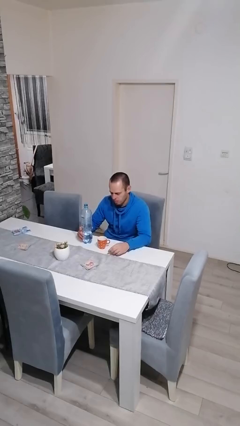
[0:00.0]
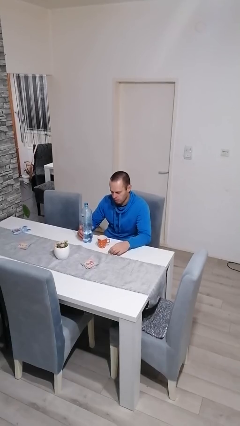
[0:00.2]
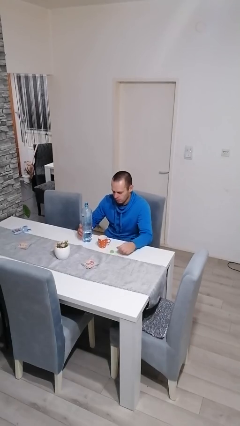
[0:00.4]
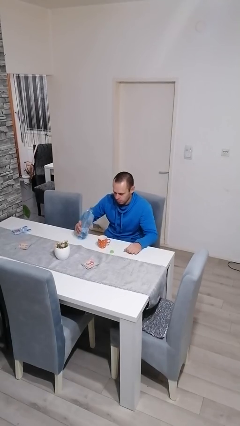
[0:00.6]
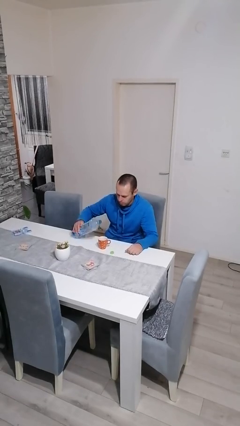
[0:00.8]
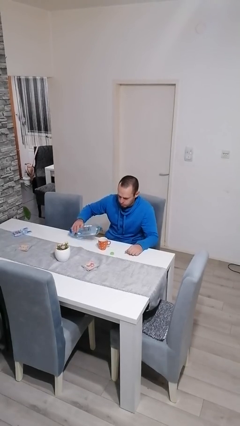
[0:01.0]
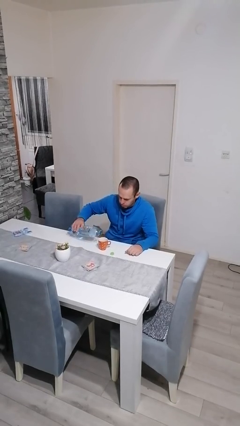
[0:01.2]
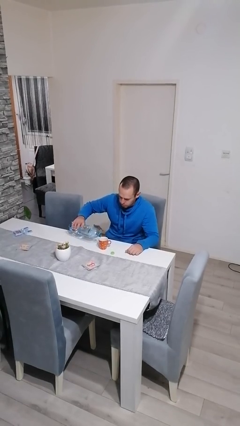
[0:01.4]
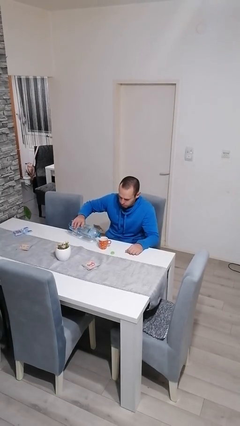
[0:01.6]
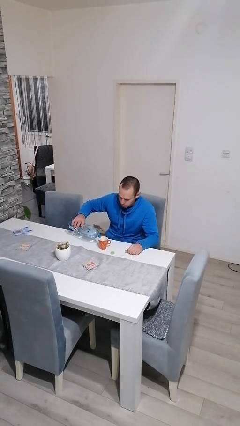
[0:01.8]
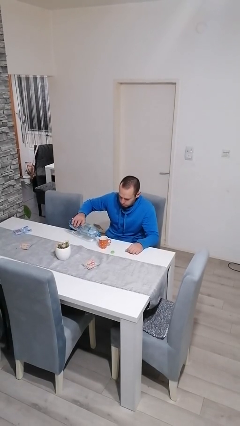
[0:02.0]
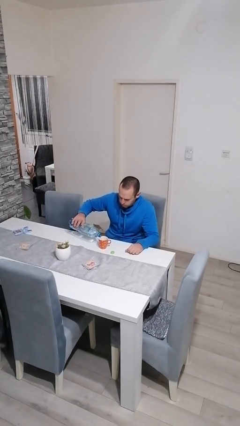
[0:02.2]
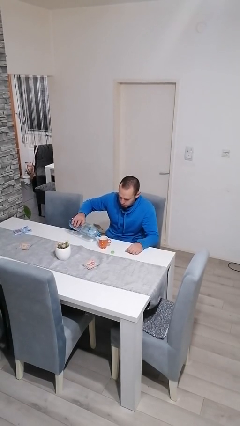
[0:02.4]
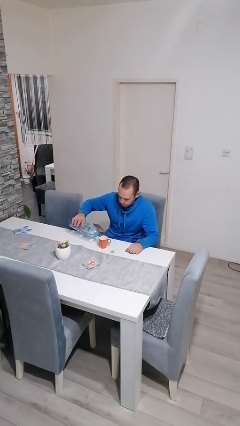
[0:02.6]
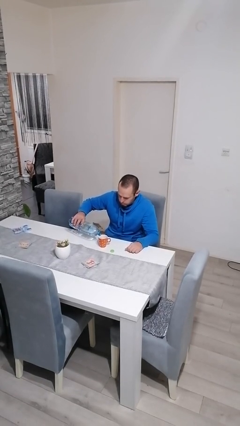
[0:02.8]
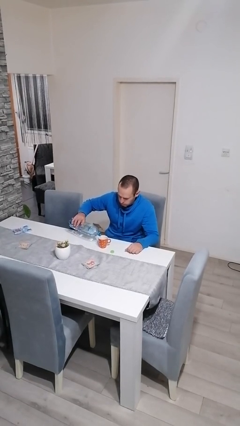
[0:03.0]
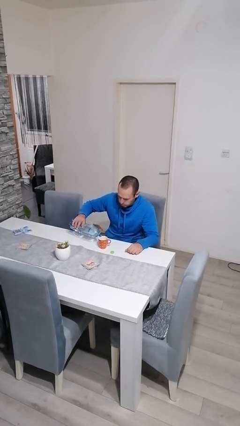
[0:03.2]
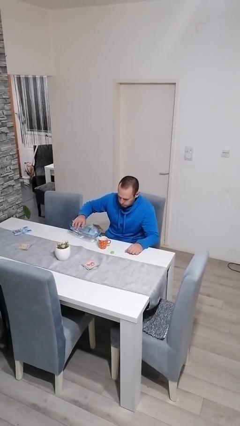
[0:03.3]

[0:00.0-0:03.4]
person pours liquid into cup

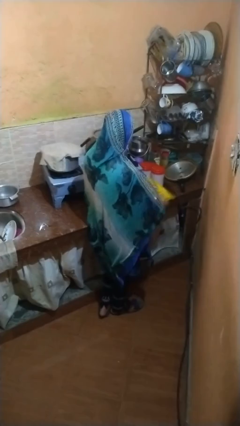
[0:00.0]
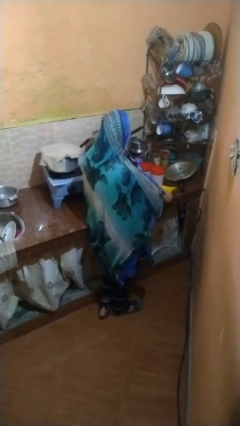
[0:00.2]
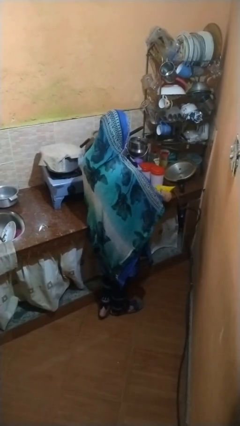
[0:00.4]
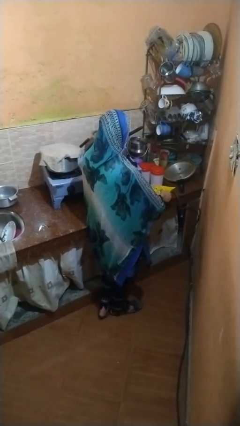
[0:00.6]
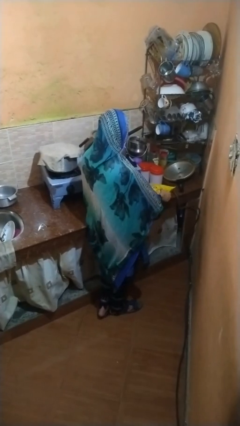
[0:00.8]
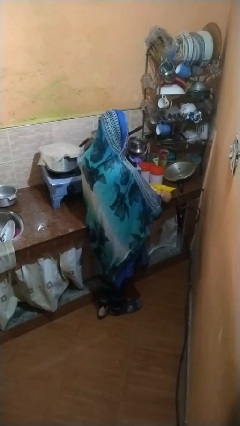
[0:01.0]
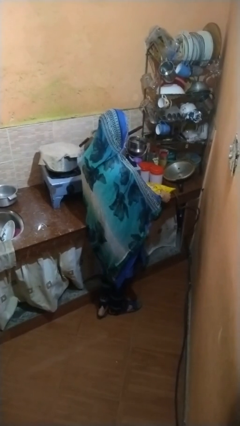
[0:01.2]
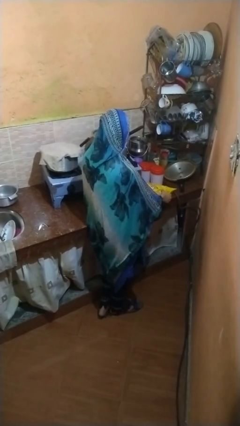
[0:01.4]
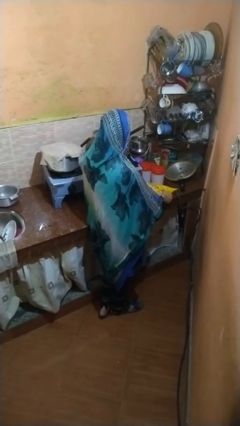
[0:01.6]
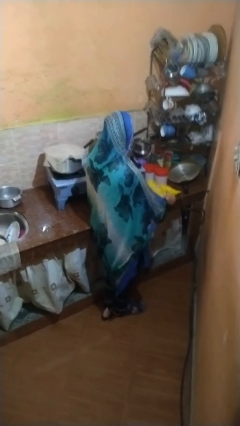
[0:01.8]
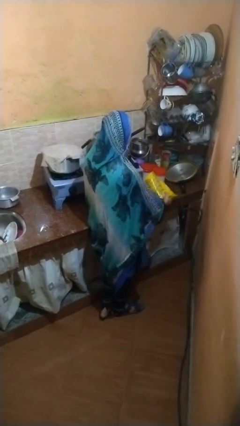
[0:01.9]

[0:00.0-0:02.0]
person pours into bowl

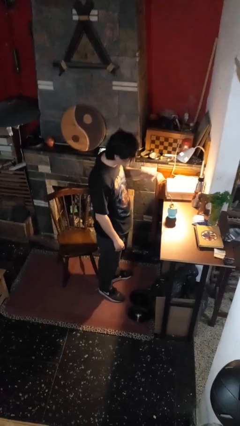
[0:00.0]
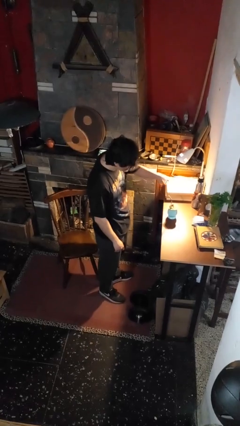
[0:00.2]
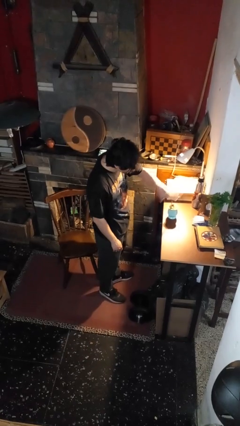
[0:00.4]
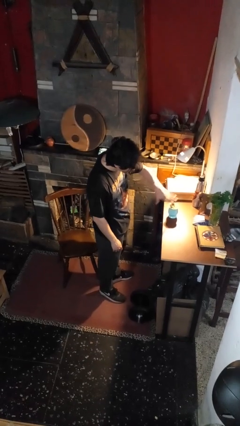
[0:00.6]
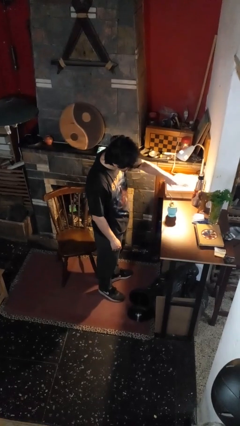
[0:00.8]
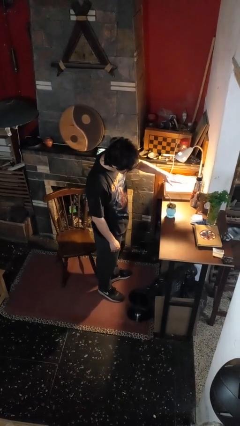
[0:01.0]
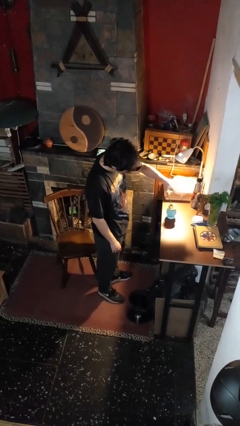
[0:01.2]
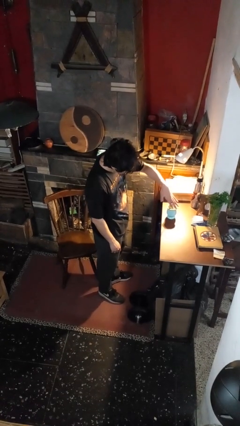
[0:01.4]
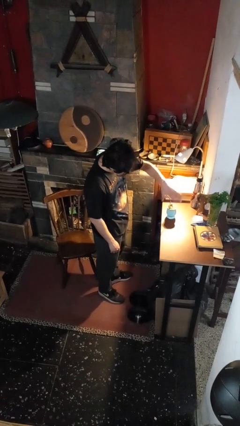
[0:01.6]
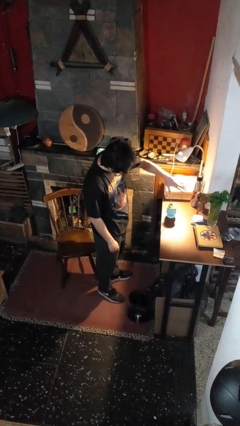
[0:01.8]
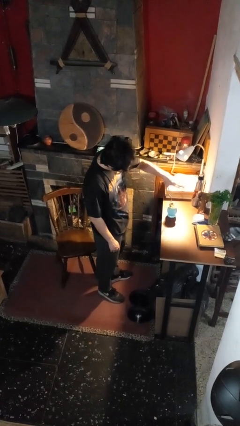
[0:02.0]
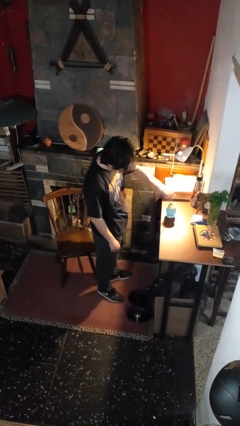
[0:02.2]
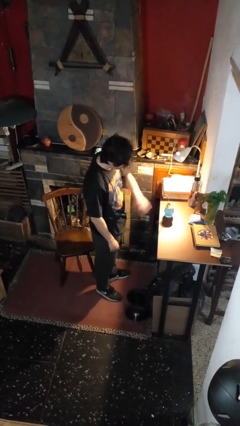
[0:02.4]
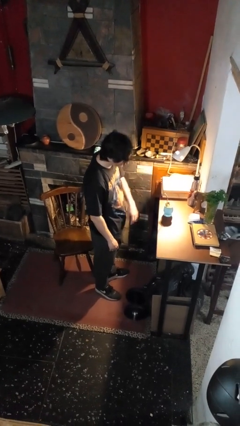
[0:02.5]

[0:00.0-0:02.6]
person waves hand over object

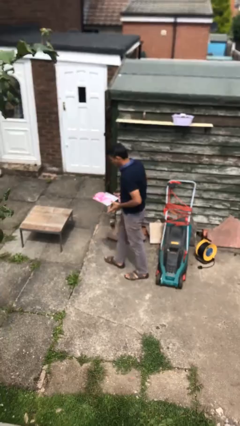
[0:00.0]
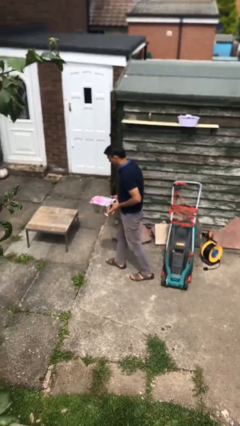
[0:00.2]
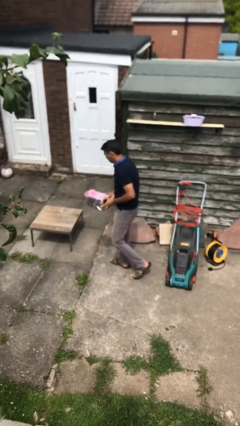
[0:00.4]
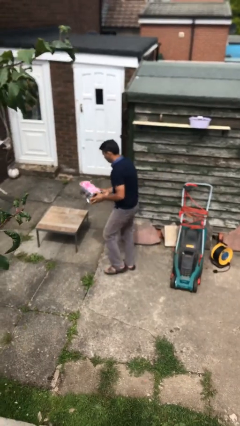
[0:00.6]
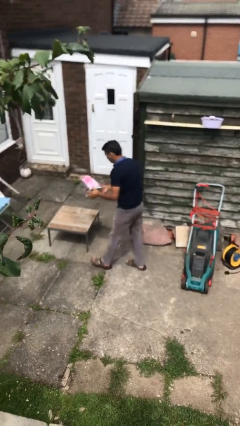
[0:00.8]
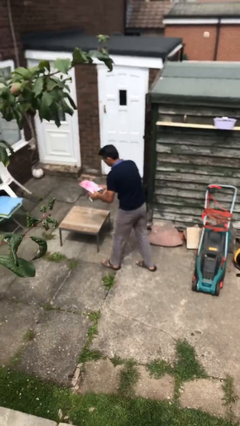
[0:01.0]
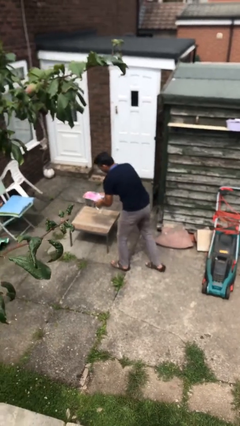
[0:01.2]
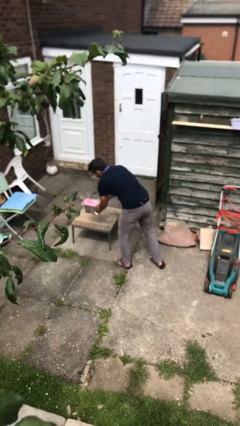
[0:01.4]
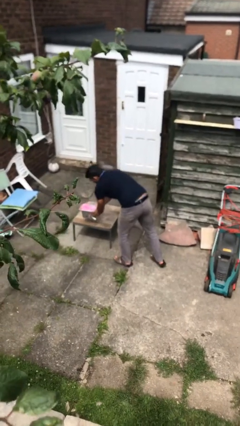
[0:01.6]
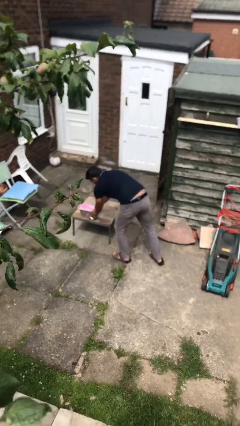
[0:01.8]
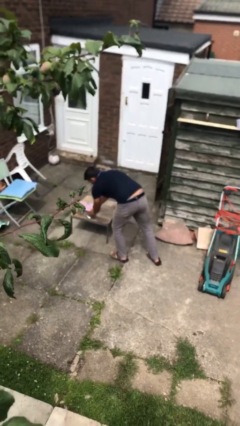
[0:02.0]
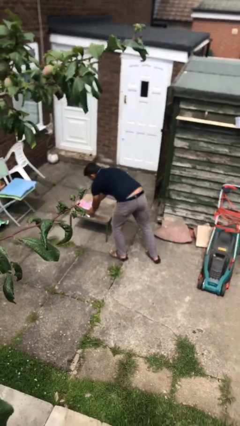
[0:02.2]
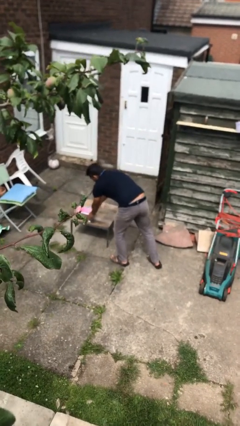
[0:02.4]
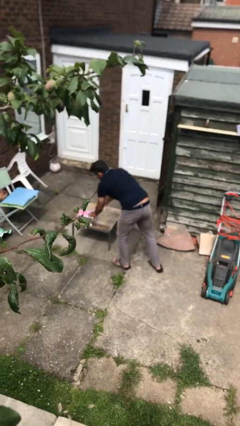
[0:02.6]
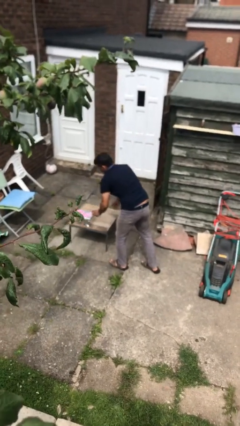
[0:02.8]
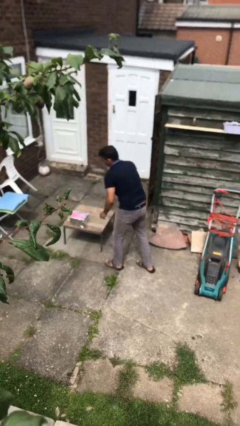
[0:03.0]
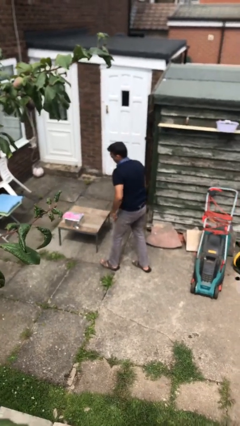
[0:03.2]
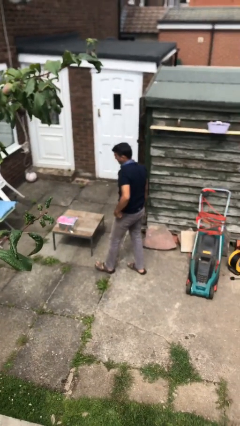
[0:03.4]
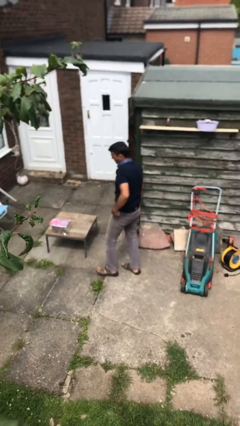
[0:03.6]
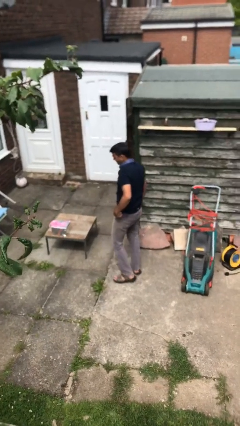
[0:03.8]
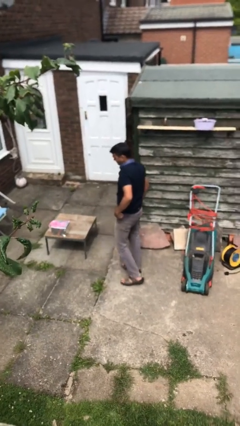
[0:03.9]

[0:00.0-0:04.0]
person puts down object on table

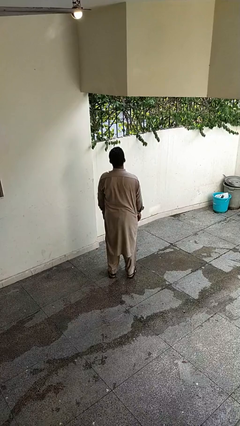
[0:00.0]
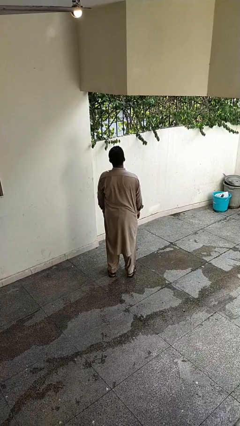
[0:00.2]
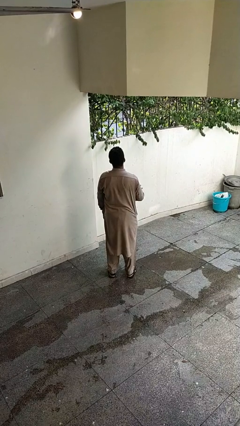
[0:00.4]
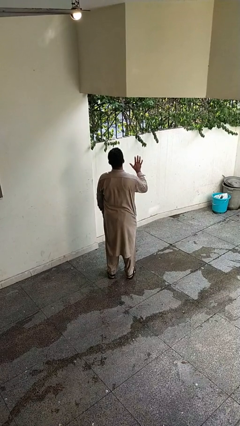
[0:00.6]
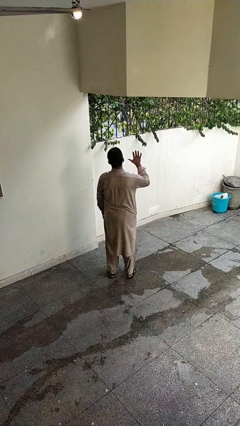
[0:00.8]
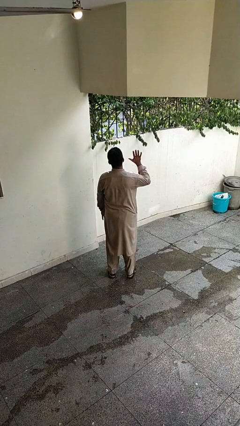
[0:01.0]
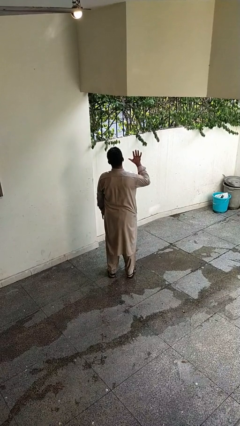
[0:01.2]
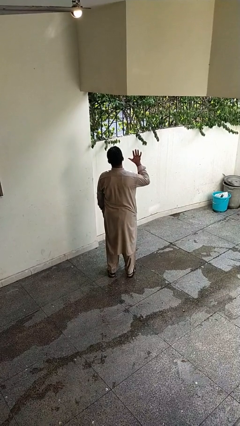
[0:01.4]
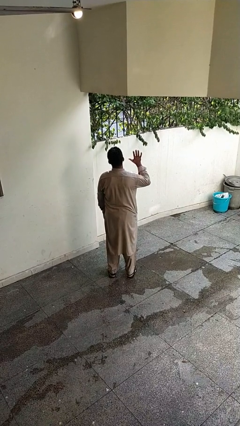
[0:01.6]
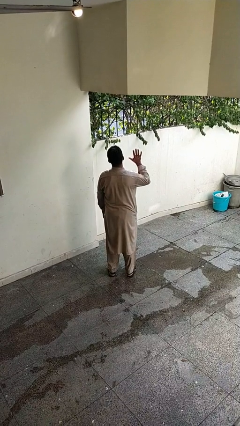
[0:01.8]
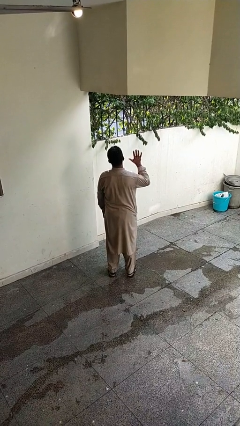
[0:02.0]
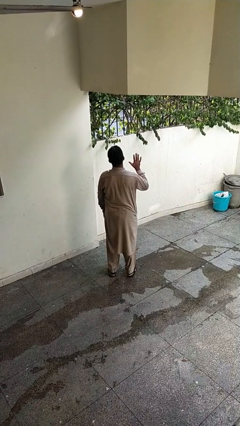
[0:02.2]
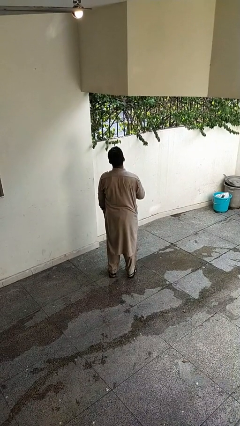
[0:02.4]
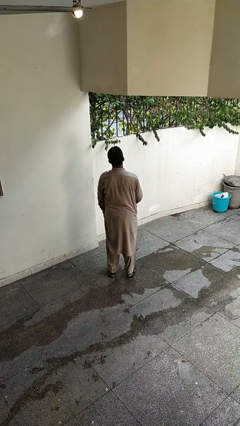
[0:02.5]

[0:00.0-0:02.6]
person gestures number five

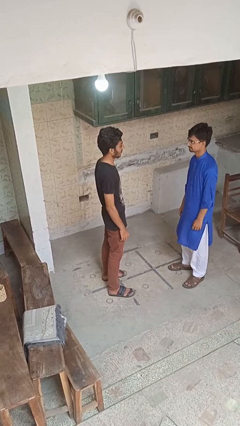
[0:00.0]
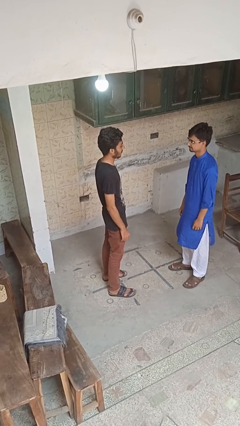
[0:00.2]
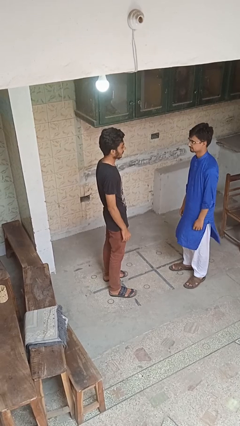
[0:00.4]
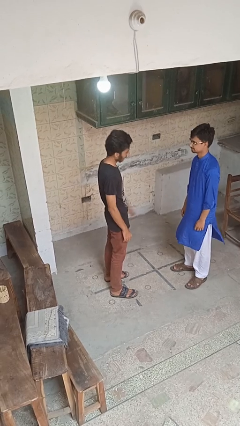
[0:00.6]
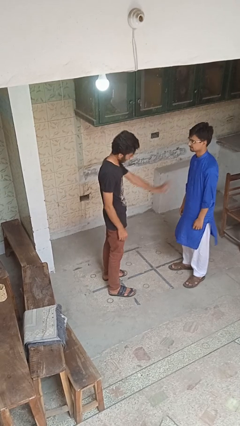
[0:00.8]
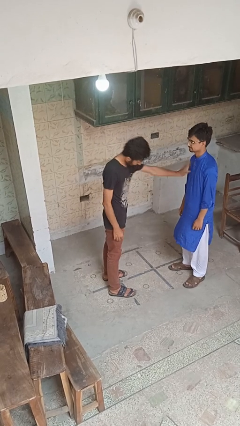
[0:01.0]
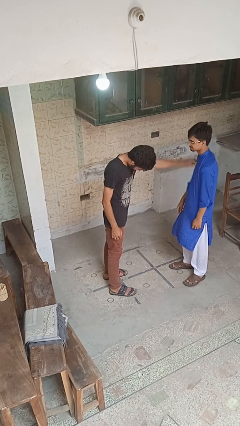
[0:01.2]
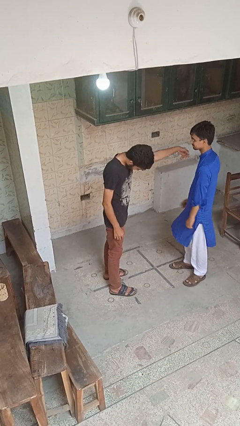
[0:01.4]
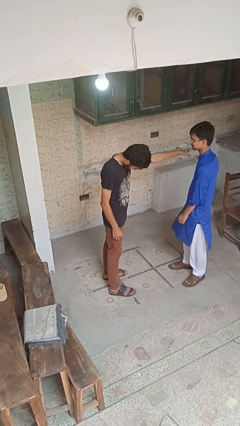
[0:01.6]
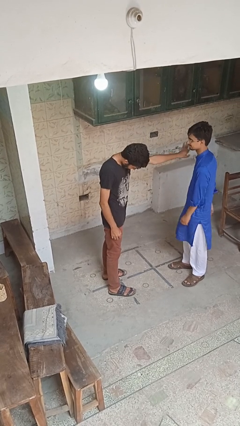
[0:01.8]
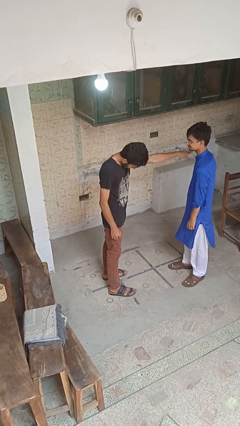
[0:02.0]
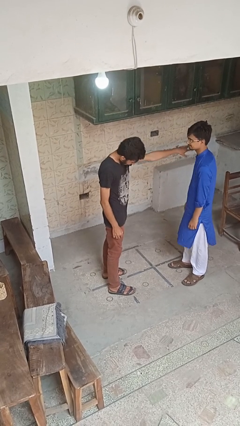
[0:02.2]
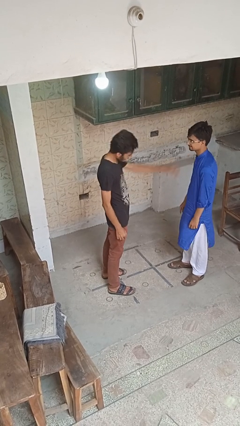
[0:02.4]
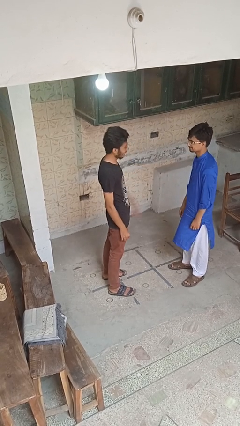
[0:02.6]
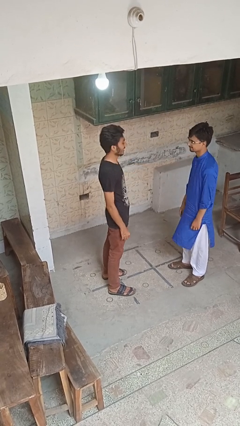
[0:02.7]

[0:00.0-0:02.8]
person shoves person

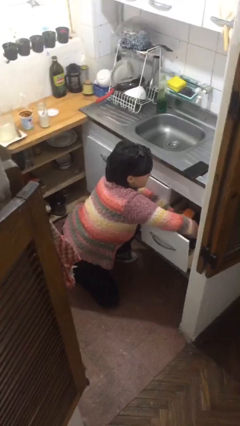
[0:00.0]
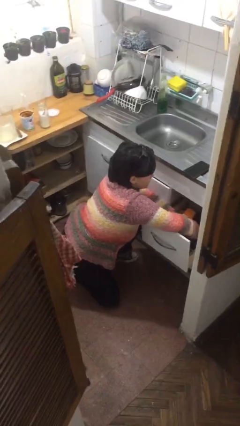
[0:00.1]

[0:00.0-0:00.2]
person searches in kitchen drawer
